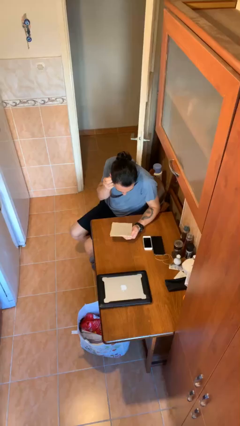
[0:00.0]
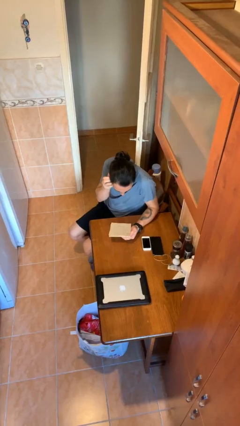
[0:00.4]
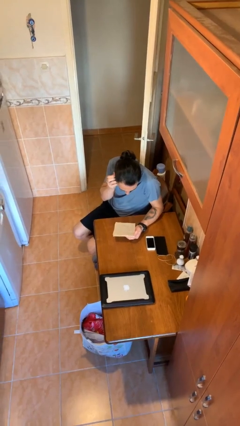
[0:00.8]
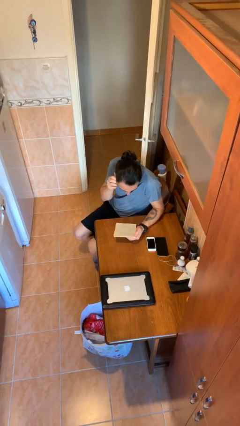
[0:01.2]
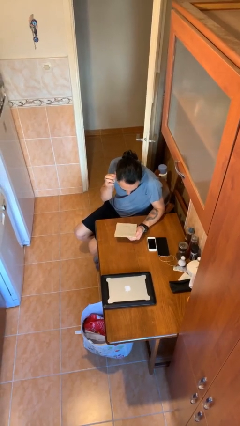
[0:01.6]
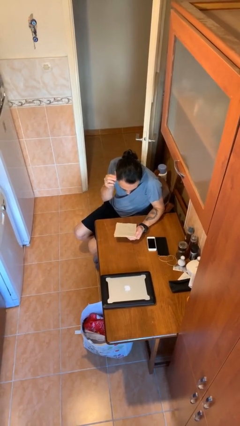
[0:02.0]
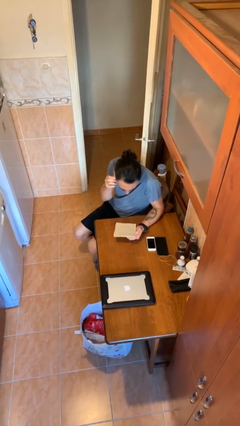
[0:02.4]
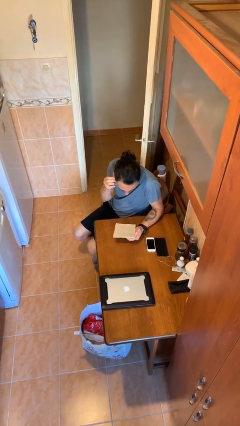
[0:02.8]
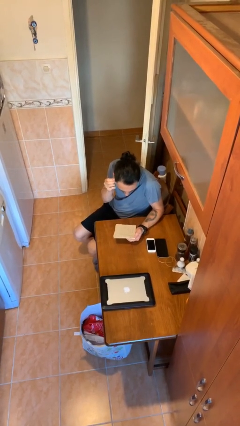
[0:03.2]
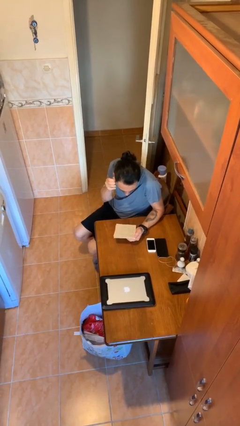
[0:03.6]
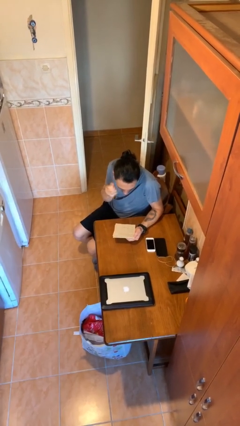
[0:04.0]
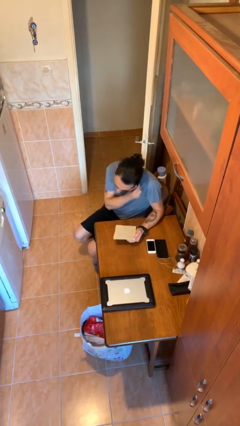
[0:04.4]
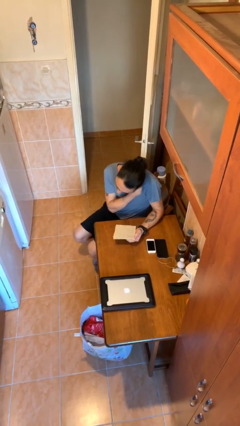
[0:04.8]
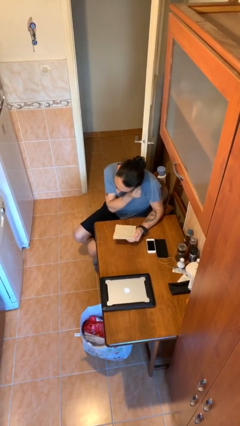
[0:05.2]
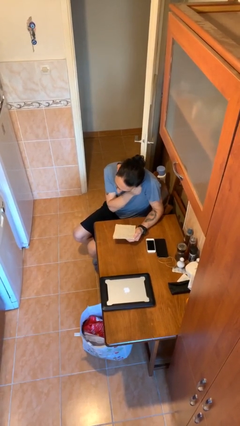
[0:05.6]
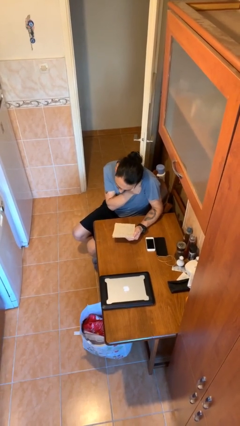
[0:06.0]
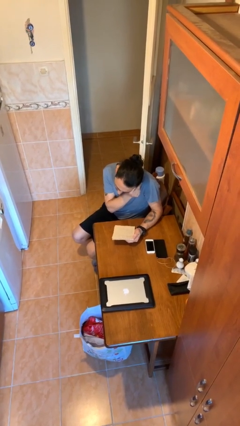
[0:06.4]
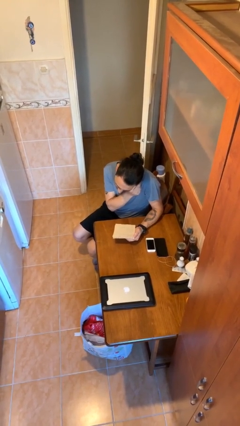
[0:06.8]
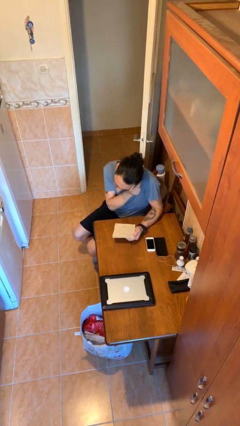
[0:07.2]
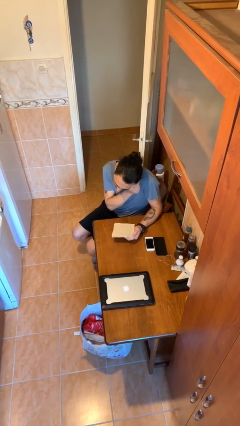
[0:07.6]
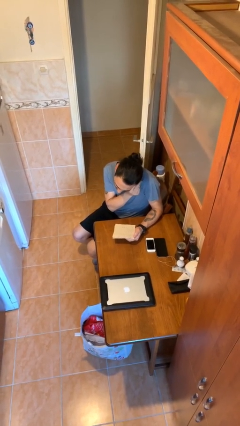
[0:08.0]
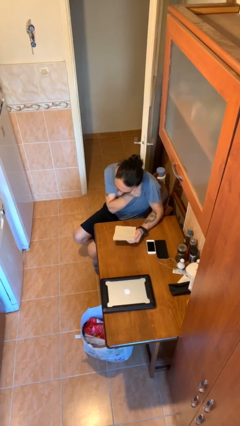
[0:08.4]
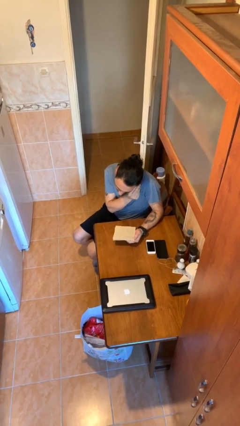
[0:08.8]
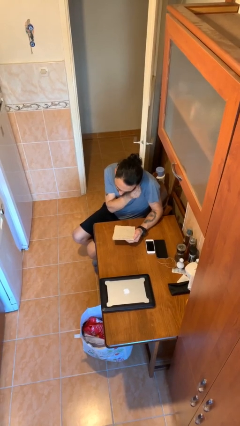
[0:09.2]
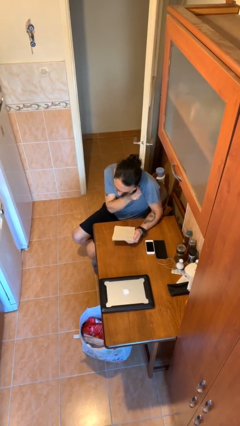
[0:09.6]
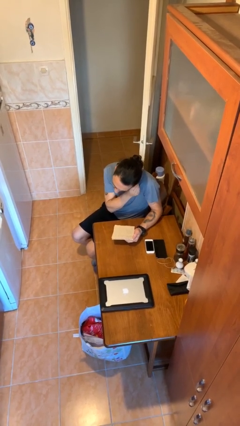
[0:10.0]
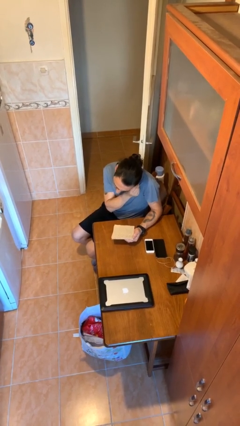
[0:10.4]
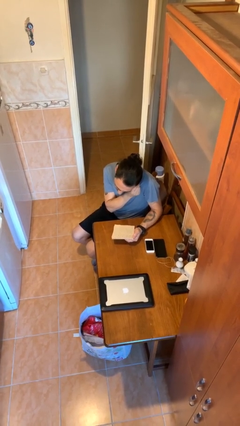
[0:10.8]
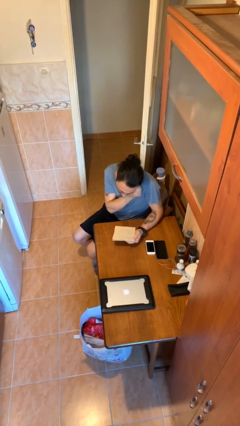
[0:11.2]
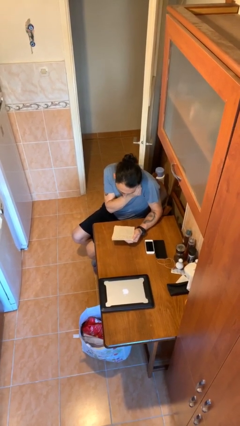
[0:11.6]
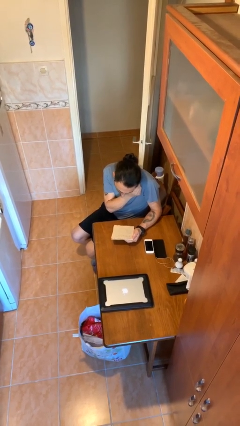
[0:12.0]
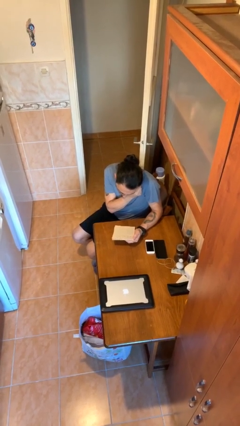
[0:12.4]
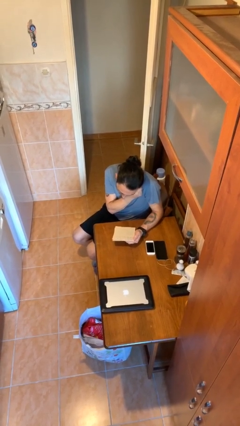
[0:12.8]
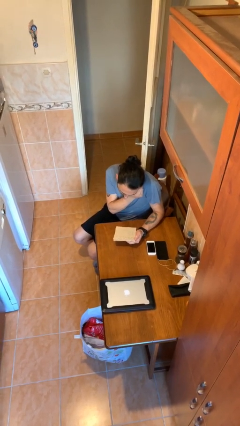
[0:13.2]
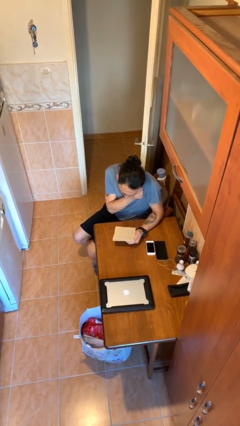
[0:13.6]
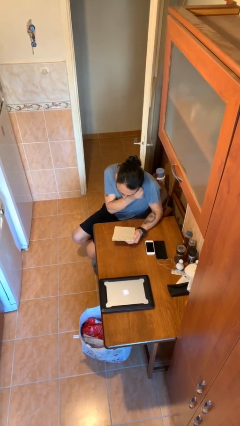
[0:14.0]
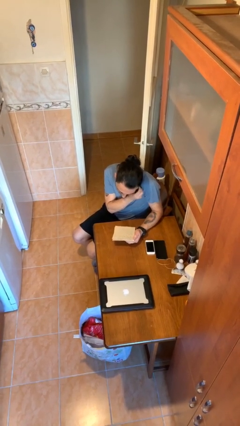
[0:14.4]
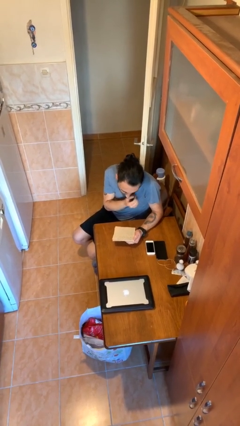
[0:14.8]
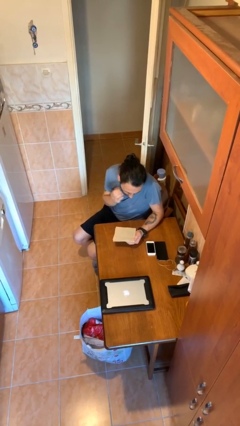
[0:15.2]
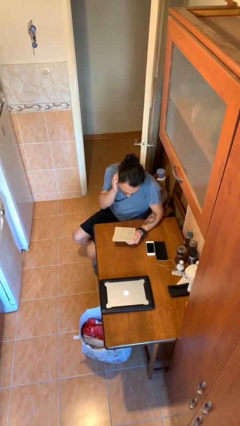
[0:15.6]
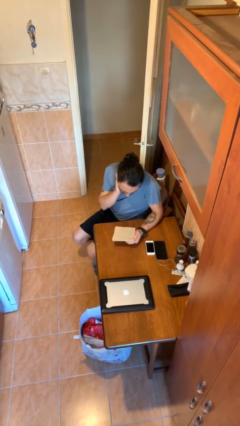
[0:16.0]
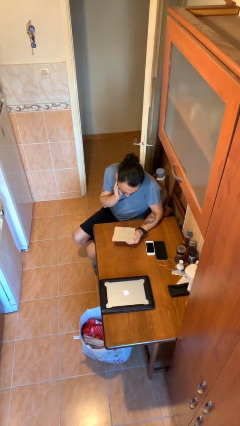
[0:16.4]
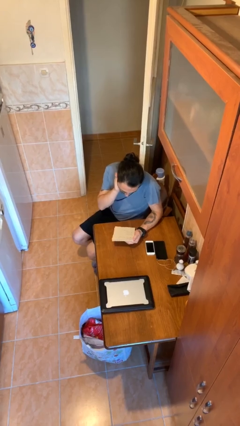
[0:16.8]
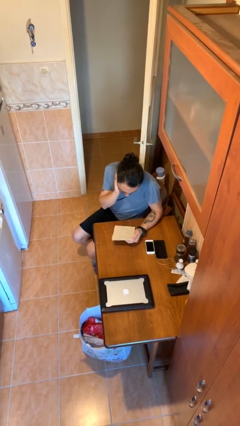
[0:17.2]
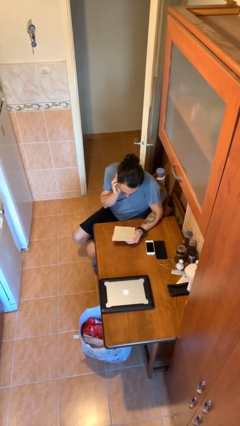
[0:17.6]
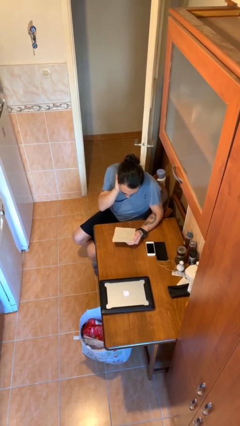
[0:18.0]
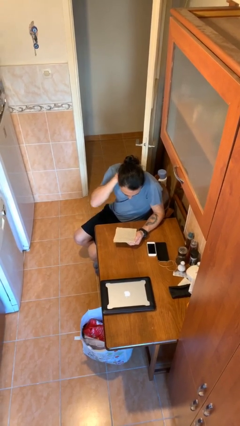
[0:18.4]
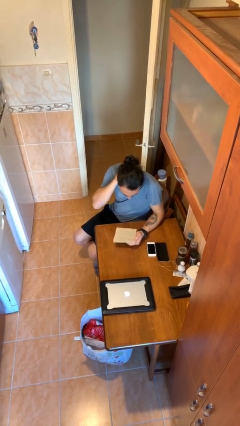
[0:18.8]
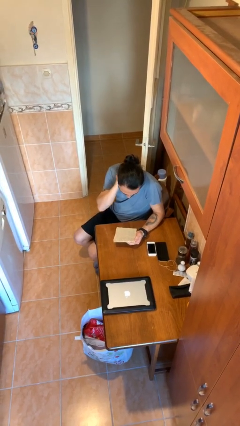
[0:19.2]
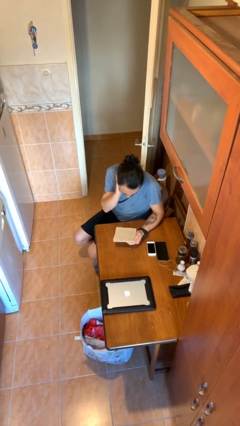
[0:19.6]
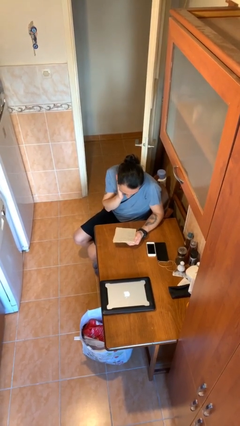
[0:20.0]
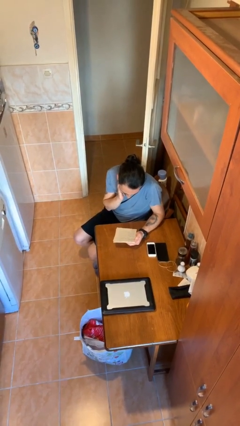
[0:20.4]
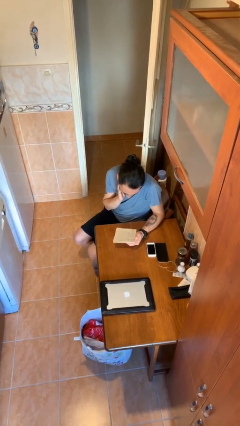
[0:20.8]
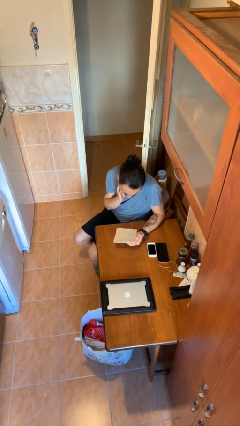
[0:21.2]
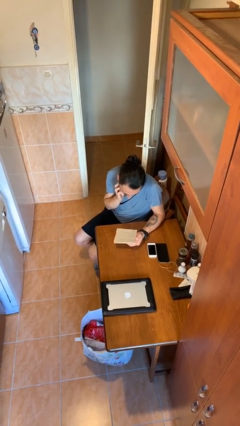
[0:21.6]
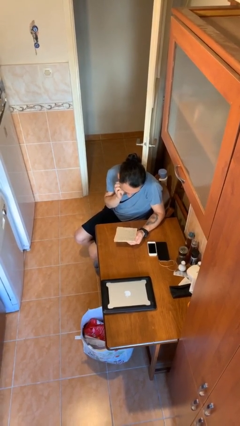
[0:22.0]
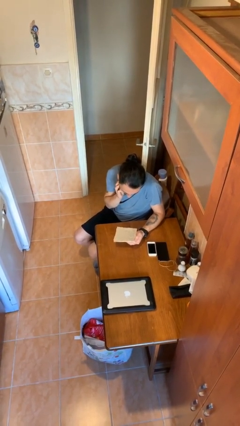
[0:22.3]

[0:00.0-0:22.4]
person reads document

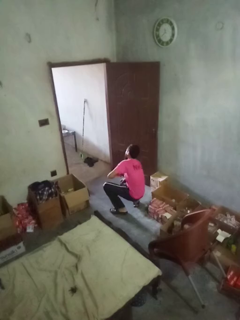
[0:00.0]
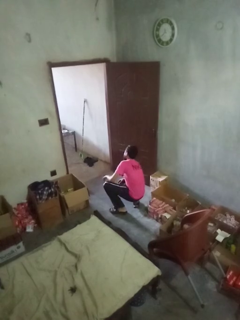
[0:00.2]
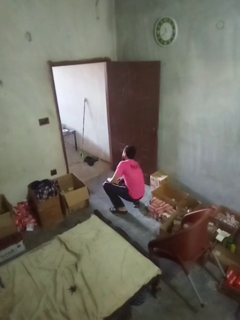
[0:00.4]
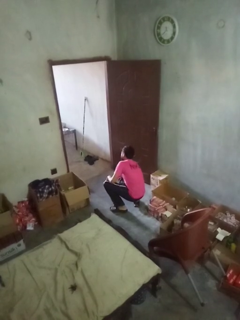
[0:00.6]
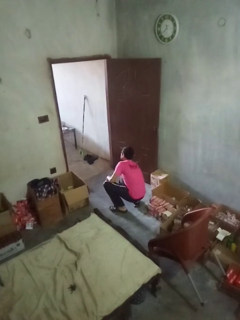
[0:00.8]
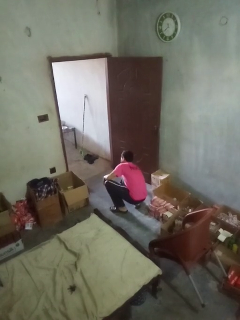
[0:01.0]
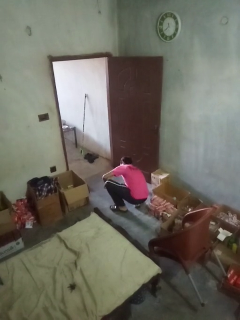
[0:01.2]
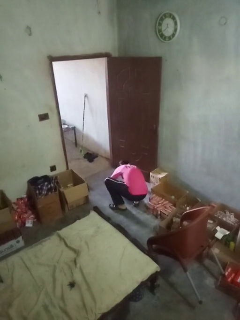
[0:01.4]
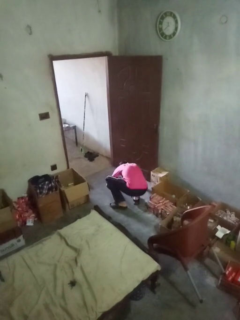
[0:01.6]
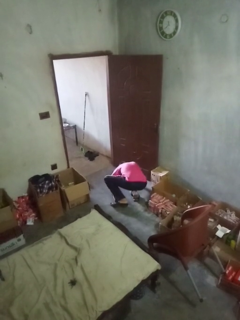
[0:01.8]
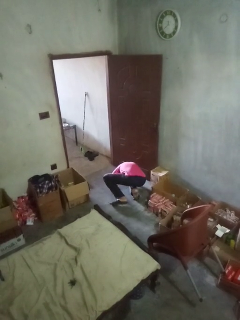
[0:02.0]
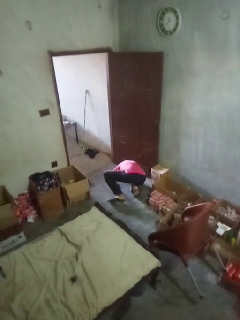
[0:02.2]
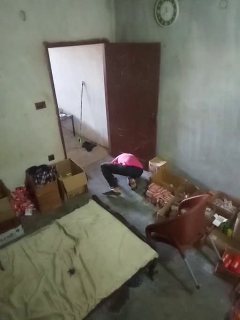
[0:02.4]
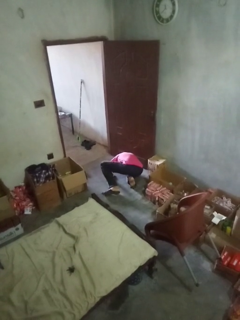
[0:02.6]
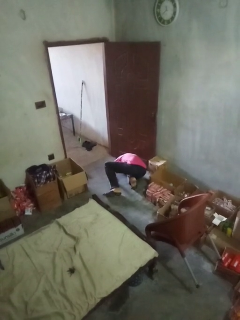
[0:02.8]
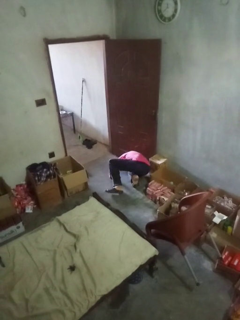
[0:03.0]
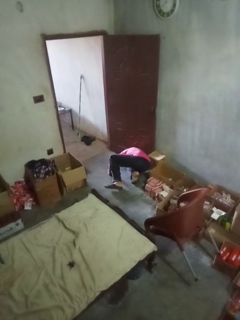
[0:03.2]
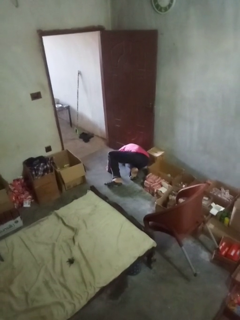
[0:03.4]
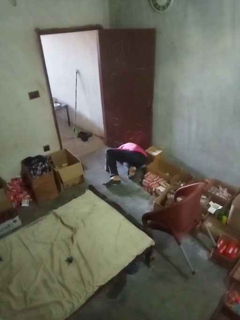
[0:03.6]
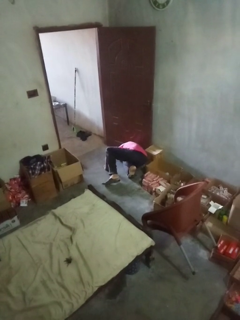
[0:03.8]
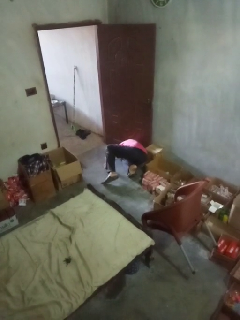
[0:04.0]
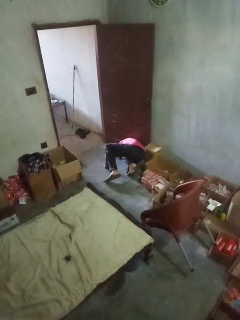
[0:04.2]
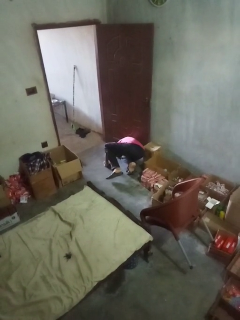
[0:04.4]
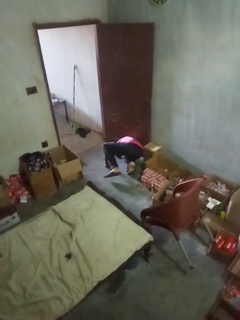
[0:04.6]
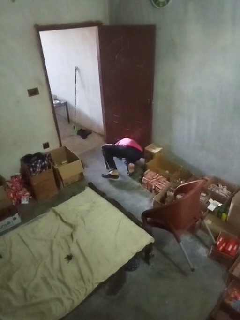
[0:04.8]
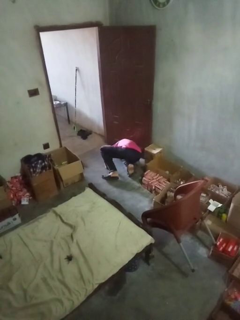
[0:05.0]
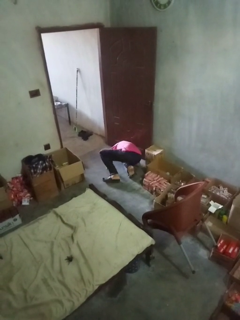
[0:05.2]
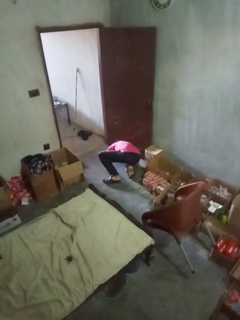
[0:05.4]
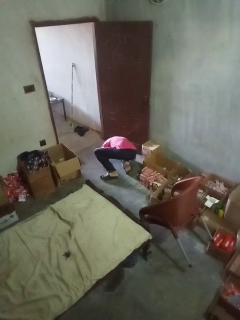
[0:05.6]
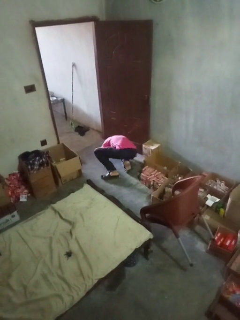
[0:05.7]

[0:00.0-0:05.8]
person lies down on floor

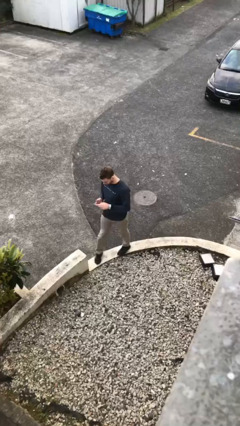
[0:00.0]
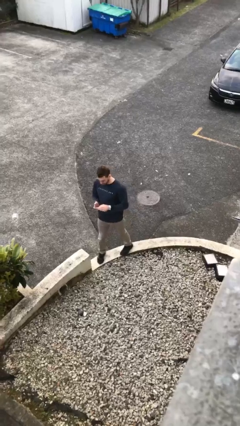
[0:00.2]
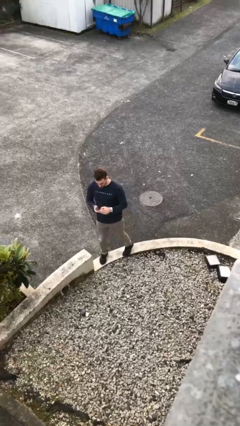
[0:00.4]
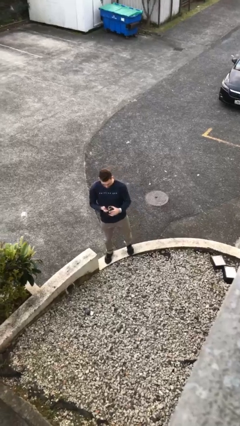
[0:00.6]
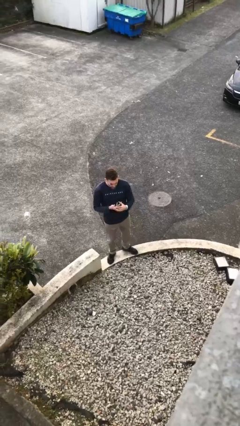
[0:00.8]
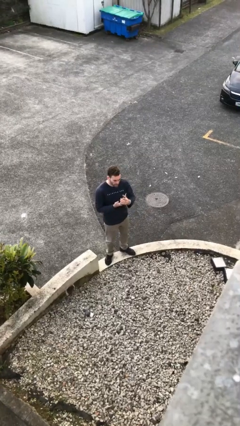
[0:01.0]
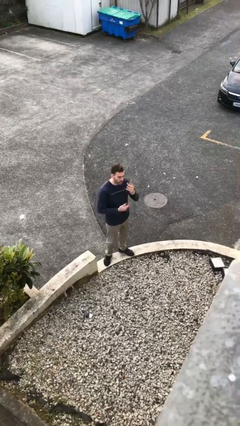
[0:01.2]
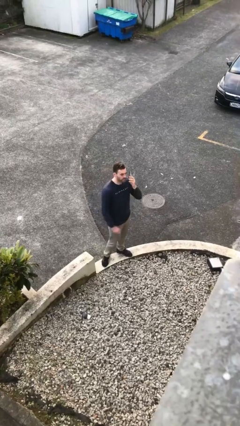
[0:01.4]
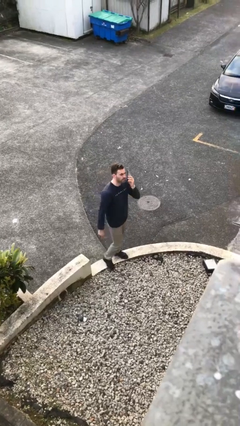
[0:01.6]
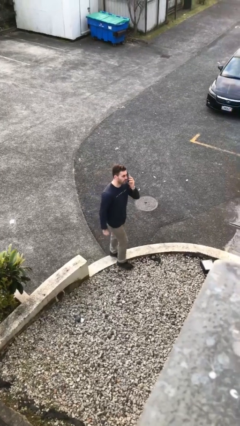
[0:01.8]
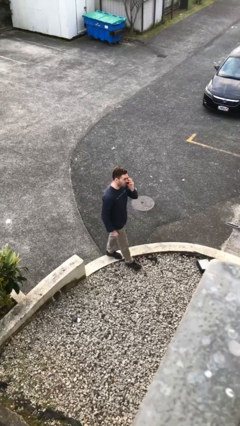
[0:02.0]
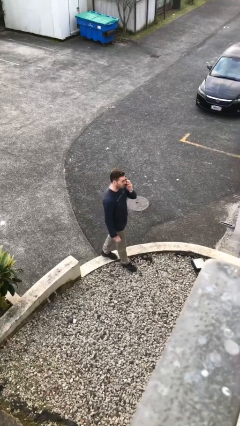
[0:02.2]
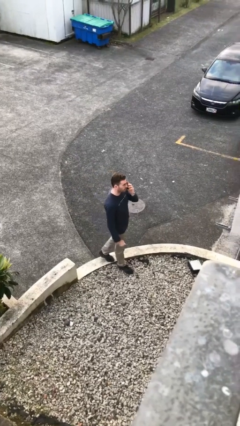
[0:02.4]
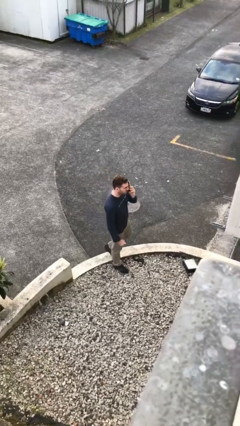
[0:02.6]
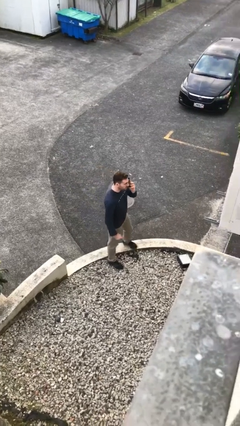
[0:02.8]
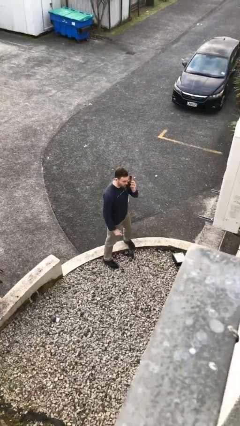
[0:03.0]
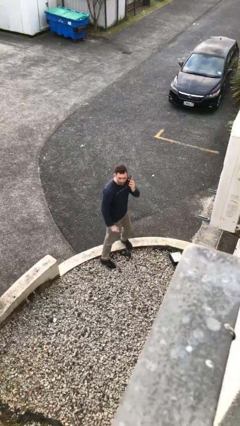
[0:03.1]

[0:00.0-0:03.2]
person talks on phone
